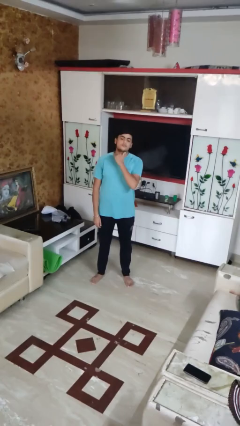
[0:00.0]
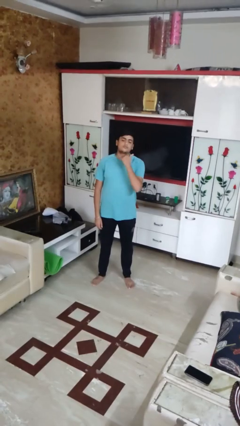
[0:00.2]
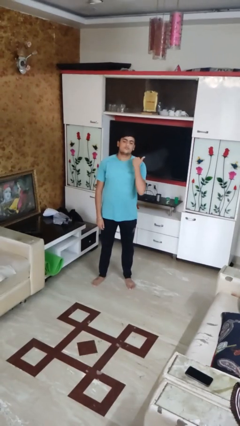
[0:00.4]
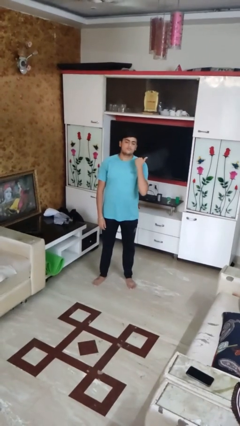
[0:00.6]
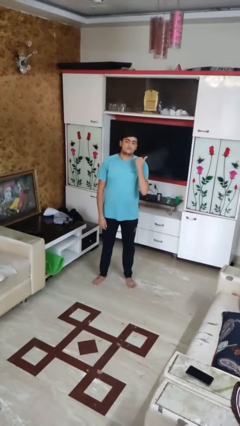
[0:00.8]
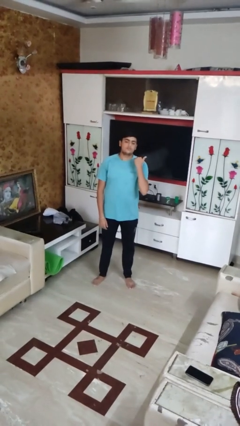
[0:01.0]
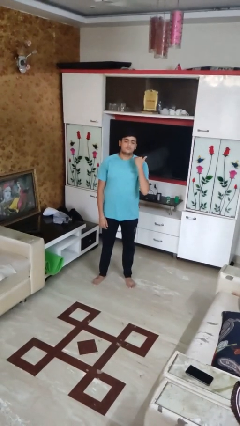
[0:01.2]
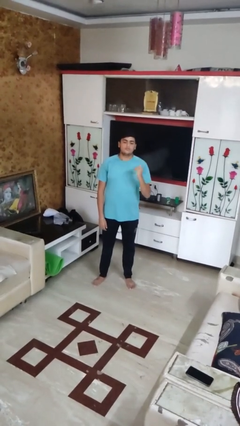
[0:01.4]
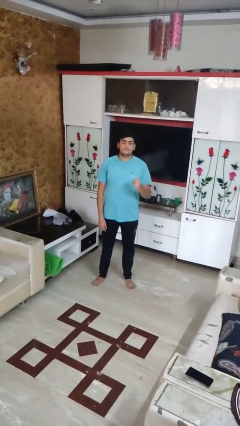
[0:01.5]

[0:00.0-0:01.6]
person gestures cut

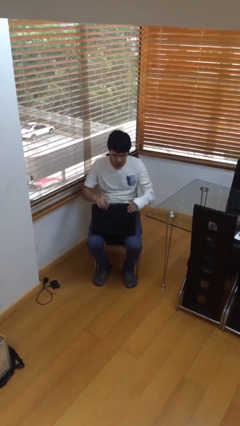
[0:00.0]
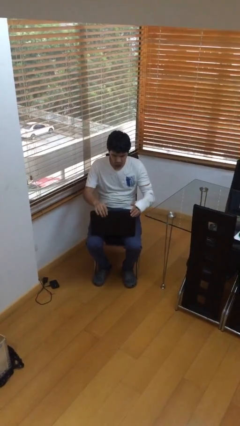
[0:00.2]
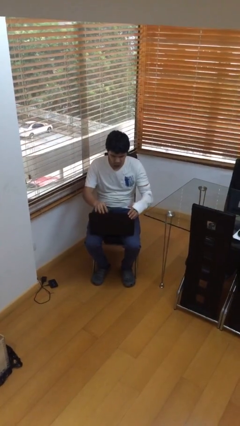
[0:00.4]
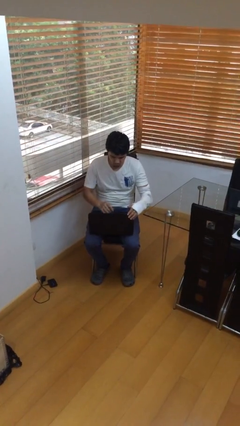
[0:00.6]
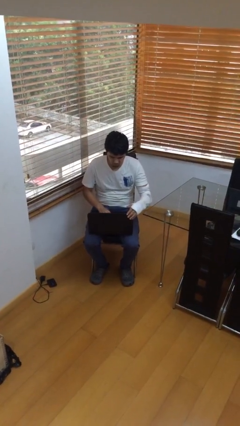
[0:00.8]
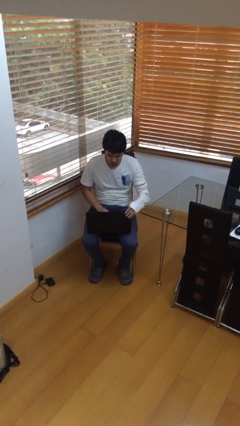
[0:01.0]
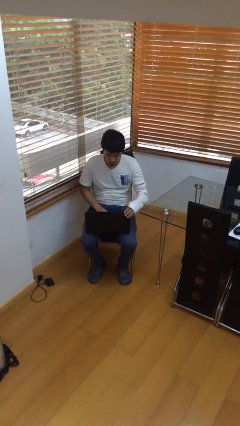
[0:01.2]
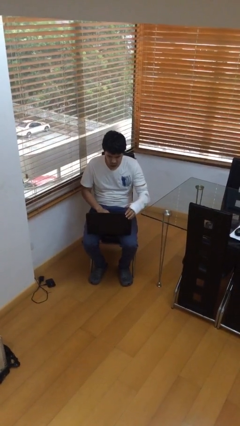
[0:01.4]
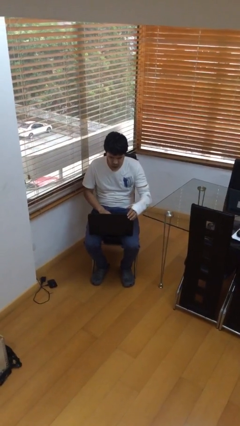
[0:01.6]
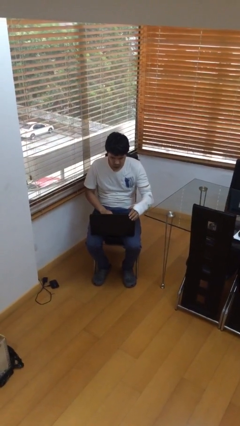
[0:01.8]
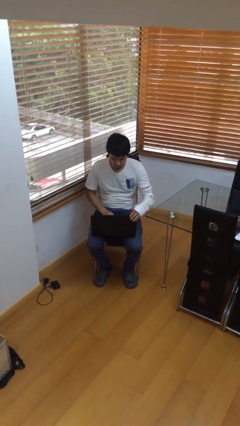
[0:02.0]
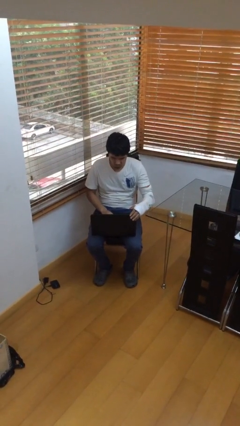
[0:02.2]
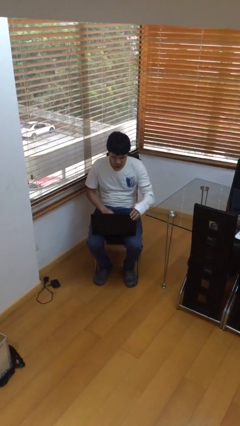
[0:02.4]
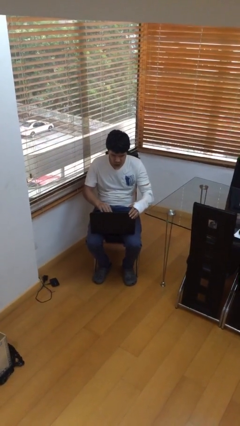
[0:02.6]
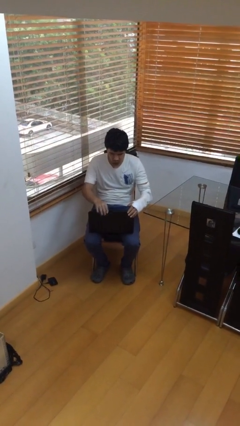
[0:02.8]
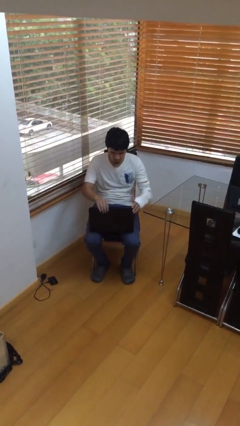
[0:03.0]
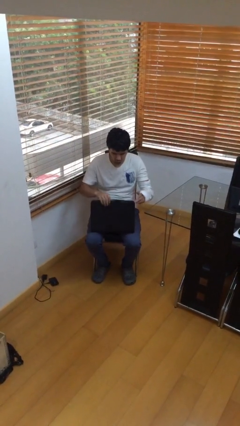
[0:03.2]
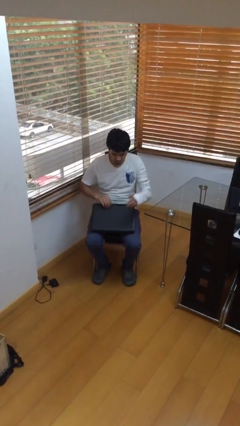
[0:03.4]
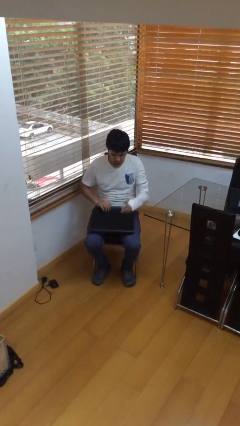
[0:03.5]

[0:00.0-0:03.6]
person interacts with laptop

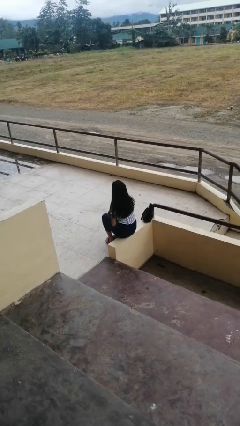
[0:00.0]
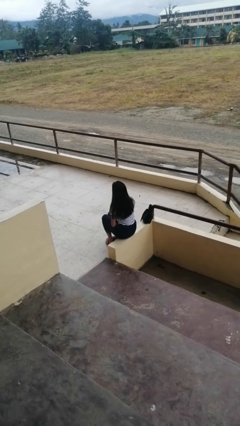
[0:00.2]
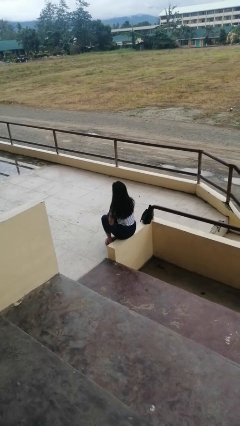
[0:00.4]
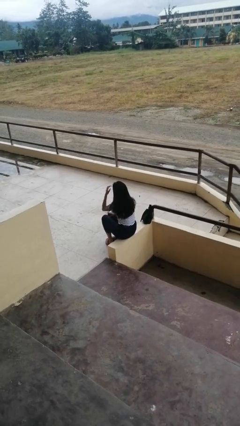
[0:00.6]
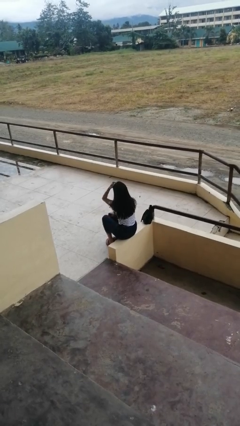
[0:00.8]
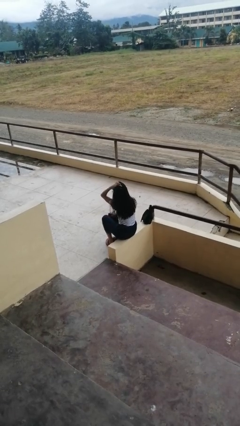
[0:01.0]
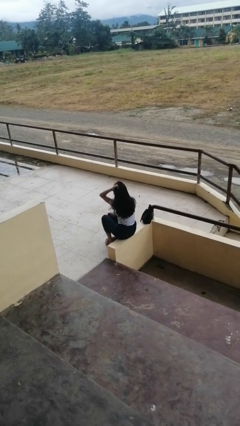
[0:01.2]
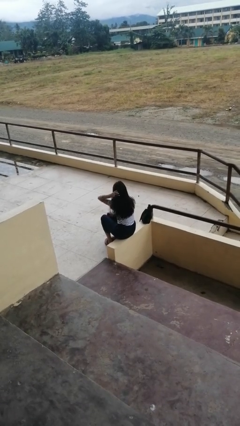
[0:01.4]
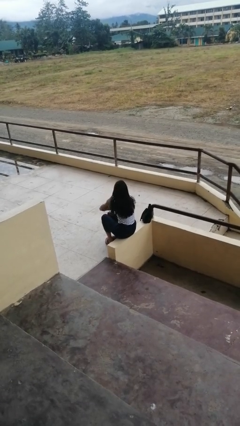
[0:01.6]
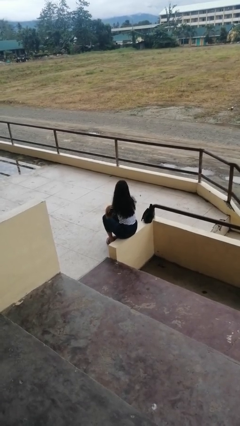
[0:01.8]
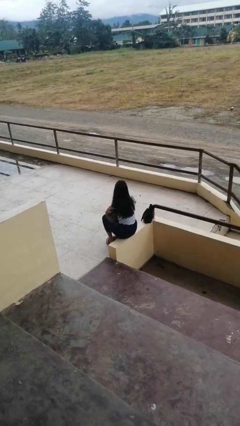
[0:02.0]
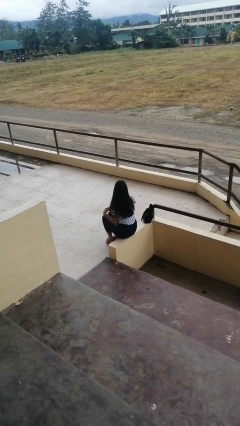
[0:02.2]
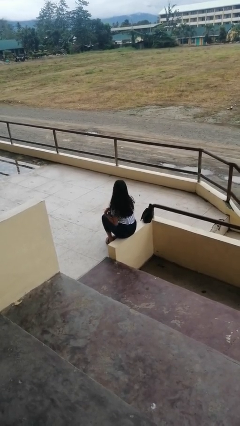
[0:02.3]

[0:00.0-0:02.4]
person strokes hair

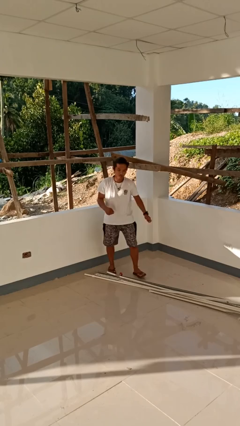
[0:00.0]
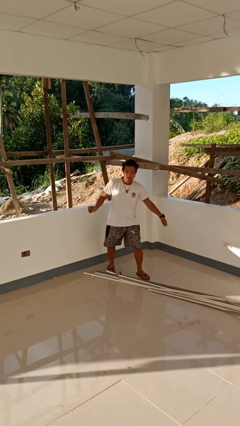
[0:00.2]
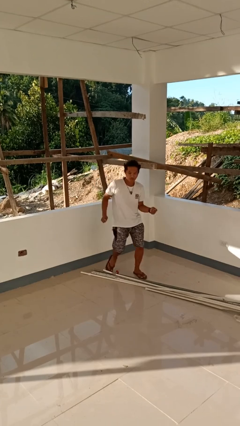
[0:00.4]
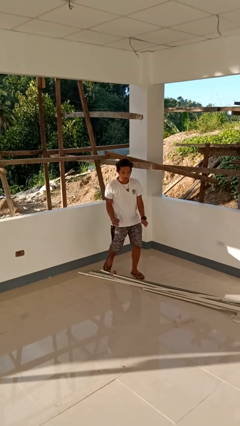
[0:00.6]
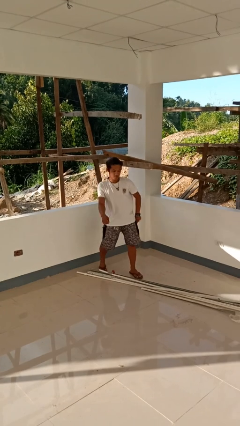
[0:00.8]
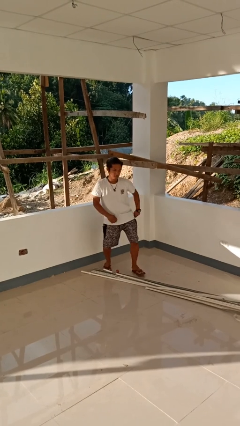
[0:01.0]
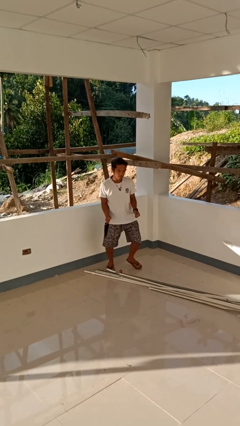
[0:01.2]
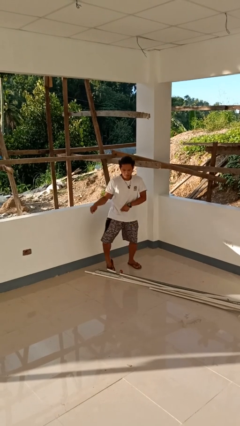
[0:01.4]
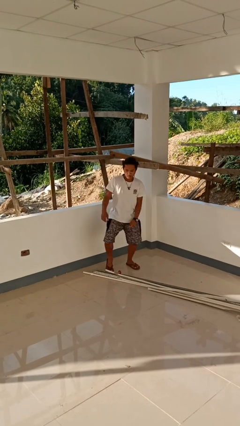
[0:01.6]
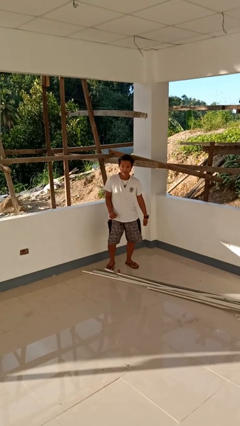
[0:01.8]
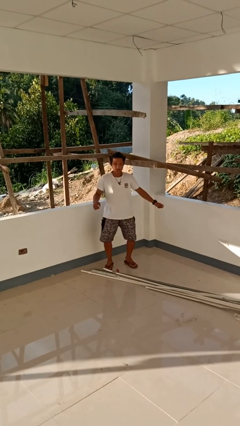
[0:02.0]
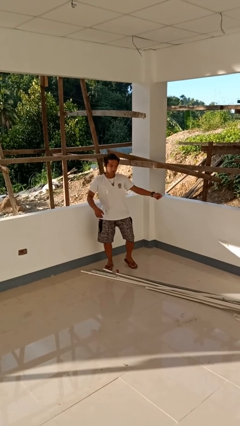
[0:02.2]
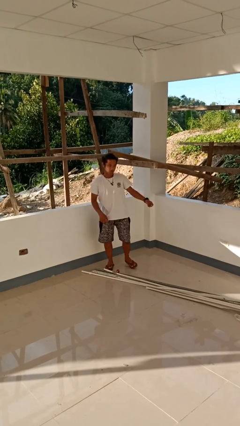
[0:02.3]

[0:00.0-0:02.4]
person dances in place

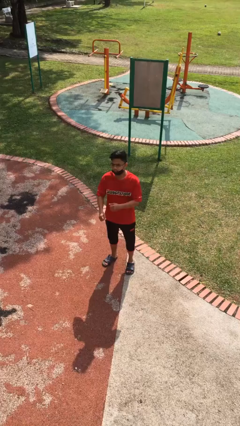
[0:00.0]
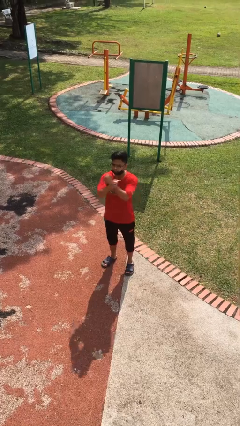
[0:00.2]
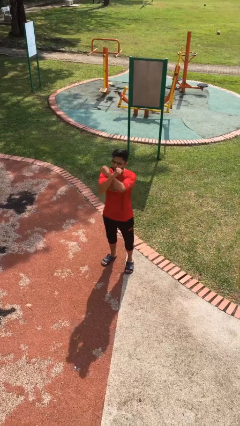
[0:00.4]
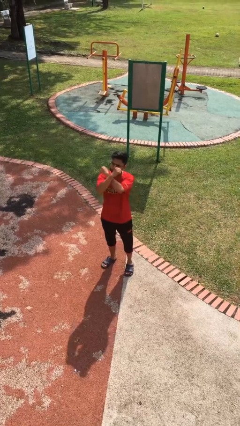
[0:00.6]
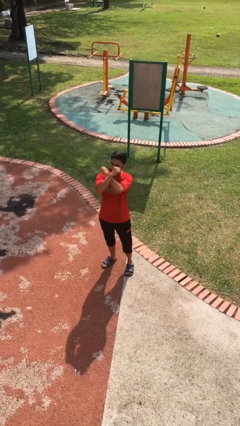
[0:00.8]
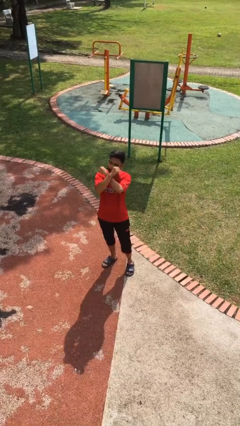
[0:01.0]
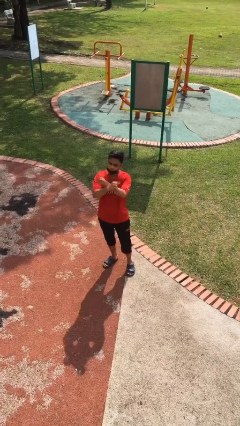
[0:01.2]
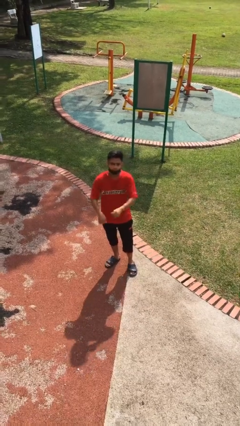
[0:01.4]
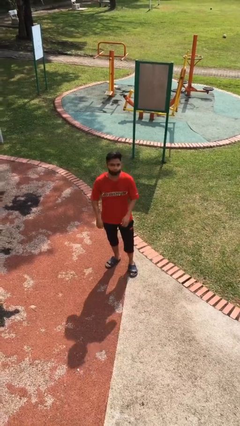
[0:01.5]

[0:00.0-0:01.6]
person gestures arms x

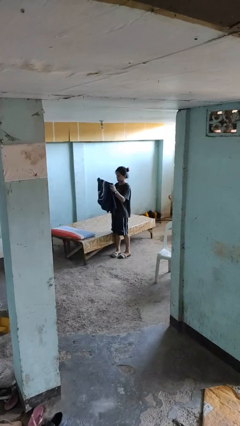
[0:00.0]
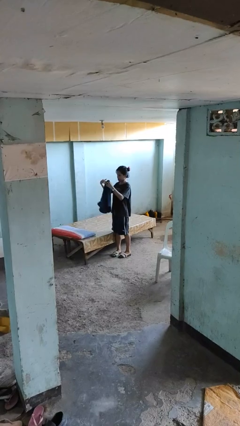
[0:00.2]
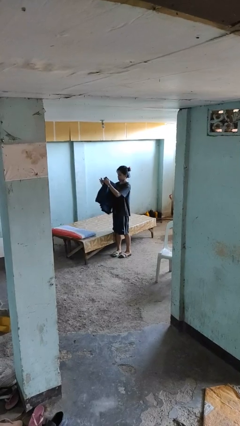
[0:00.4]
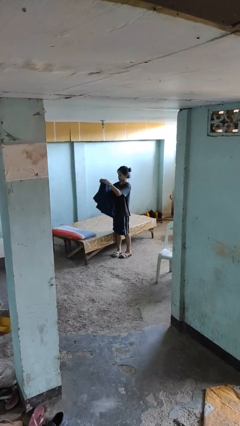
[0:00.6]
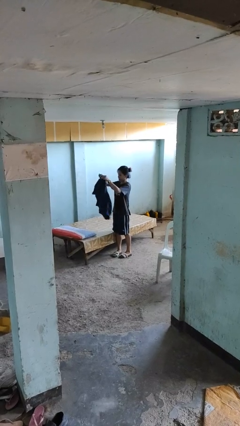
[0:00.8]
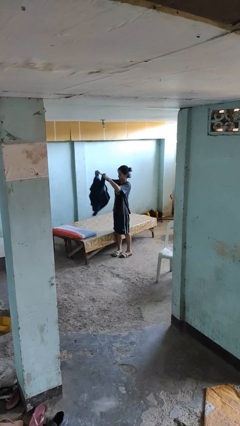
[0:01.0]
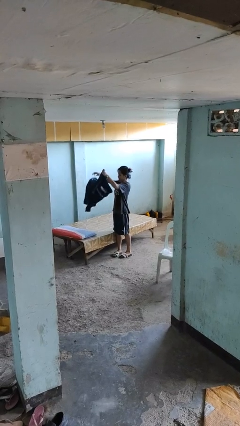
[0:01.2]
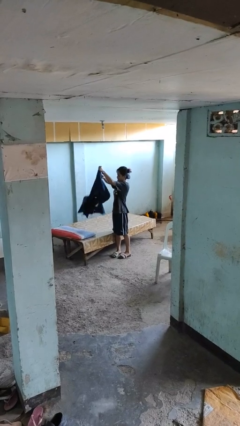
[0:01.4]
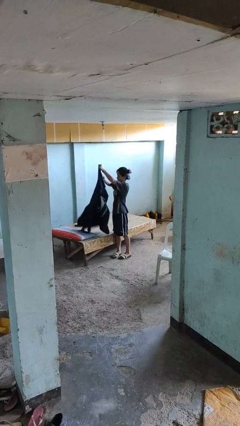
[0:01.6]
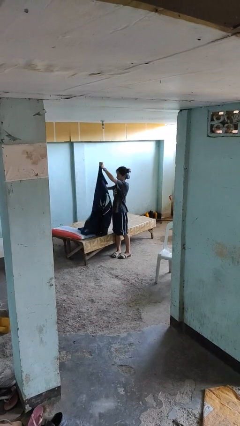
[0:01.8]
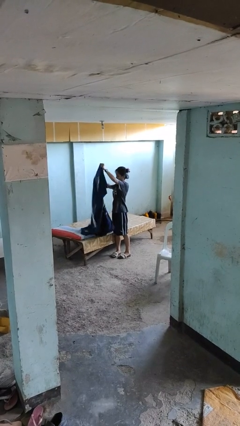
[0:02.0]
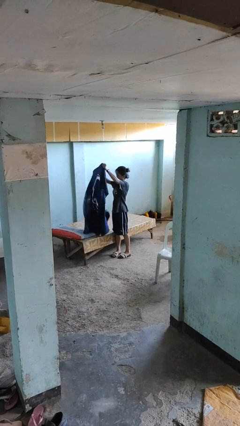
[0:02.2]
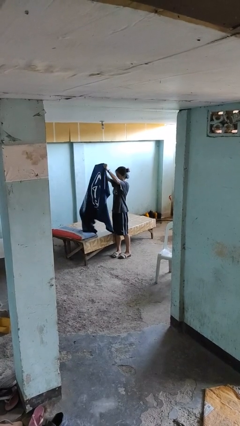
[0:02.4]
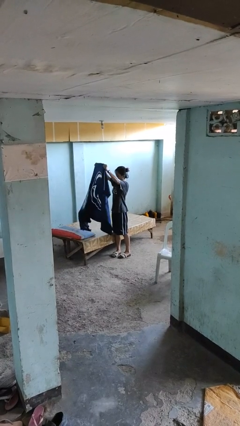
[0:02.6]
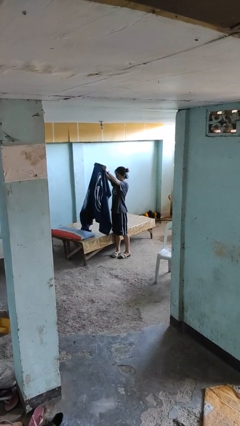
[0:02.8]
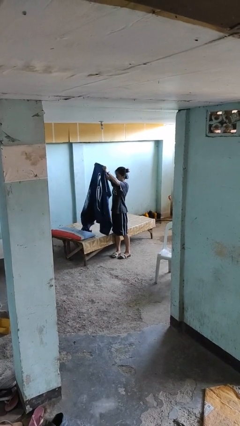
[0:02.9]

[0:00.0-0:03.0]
person unfolds blanket

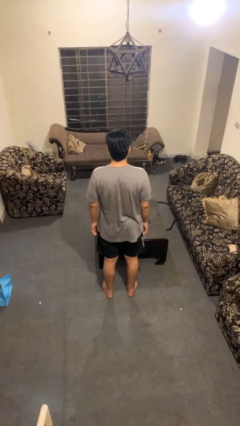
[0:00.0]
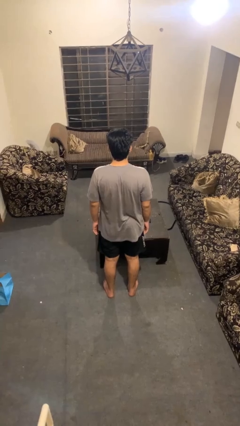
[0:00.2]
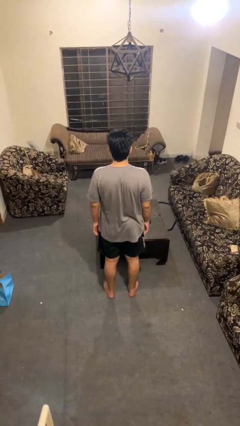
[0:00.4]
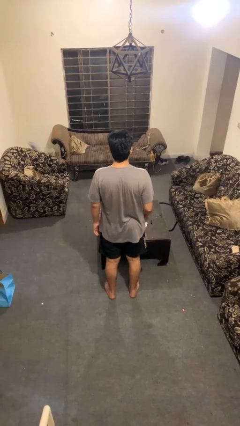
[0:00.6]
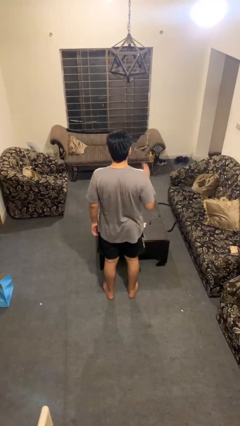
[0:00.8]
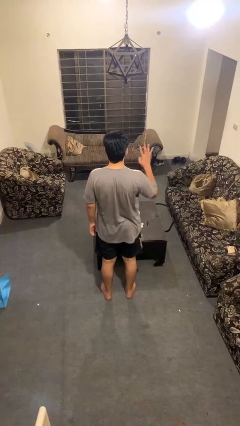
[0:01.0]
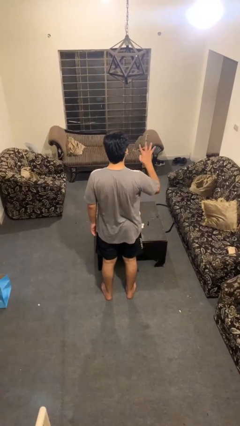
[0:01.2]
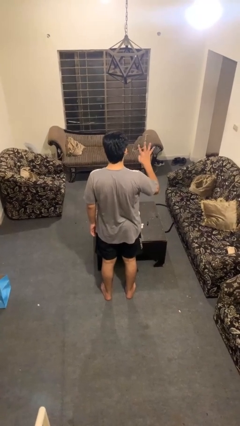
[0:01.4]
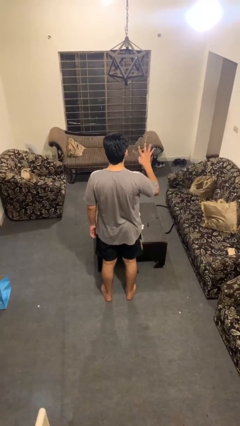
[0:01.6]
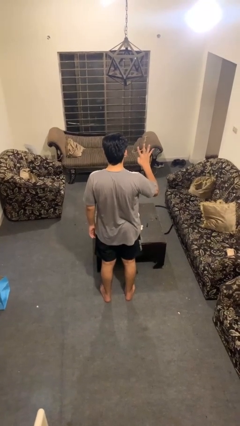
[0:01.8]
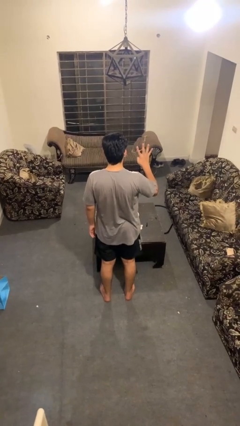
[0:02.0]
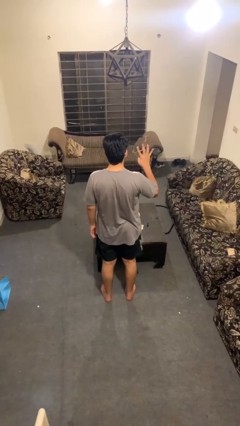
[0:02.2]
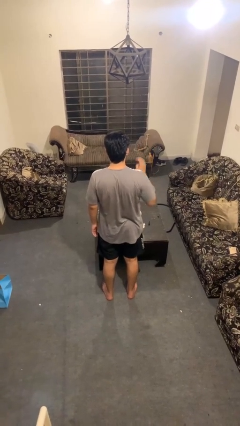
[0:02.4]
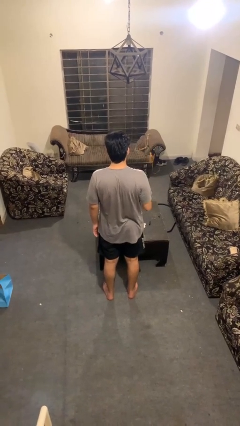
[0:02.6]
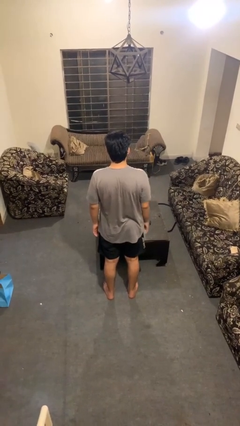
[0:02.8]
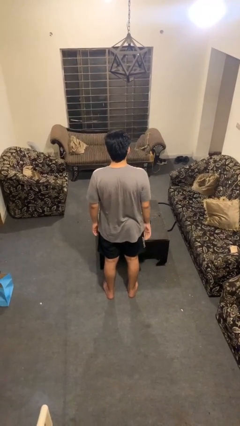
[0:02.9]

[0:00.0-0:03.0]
person gestures number four
